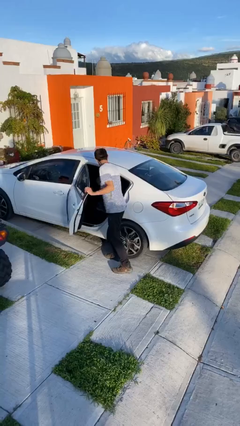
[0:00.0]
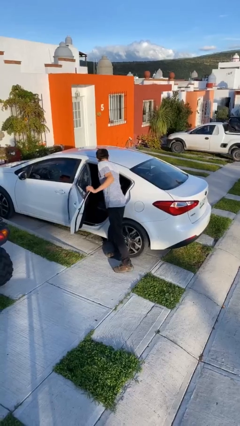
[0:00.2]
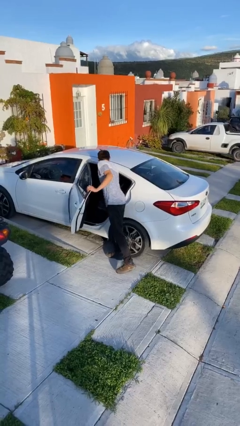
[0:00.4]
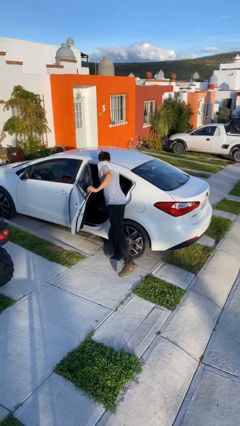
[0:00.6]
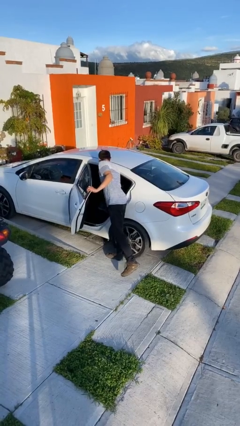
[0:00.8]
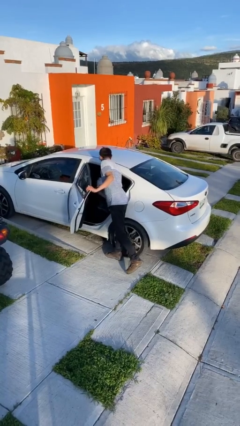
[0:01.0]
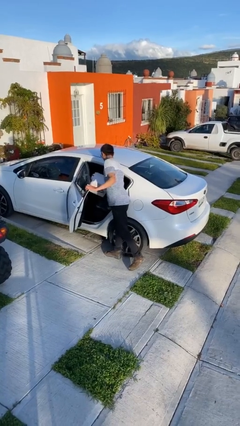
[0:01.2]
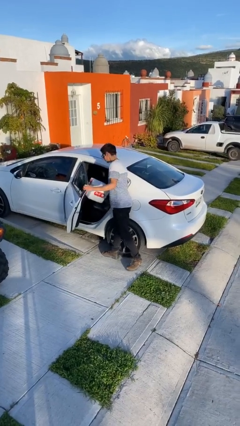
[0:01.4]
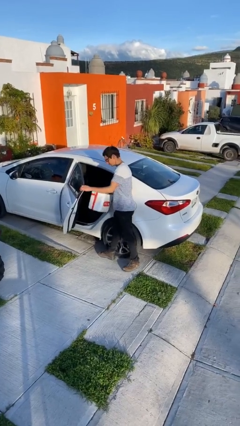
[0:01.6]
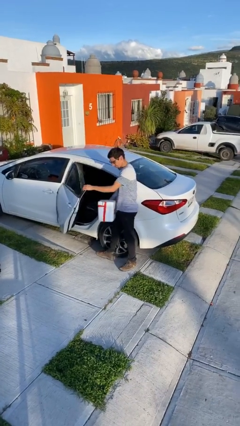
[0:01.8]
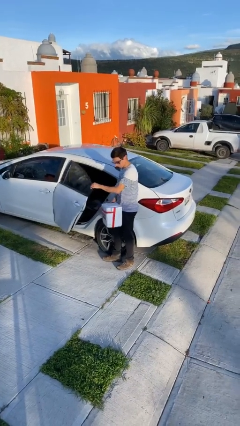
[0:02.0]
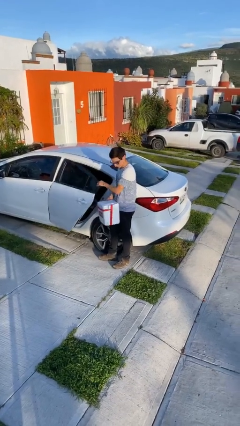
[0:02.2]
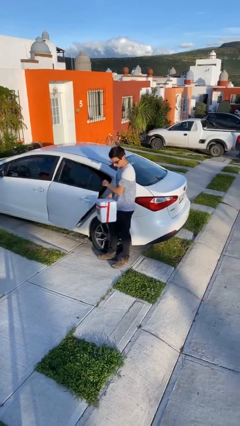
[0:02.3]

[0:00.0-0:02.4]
person unloads car

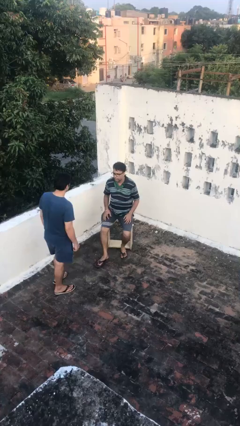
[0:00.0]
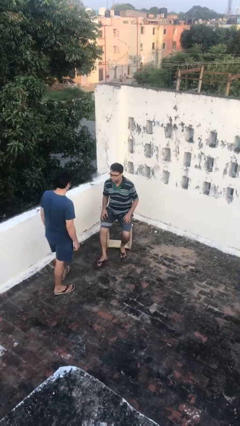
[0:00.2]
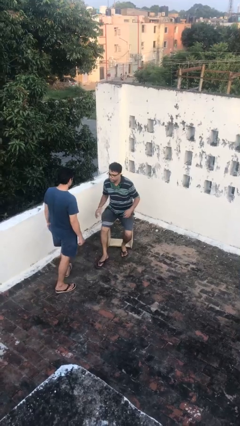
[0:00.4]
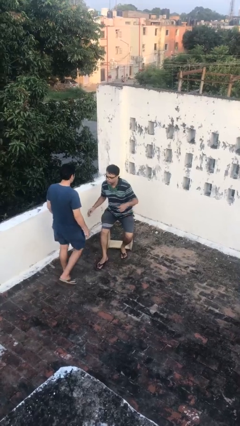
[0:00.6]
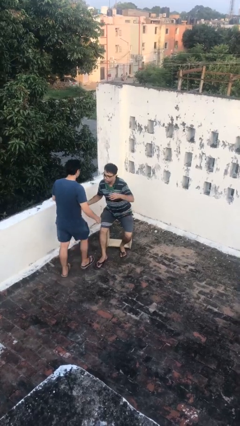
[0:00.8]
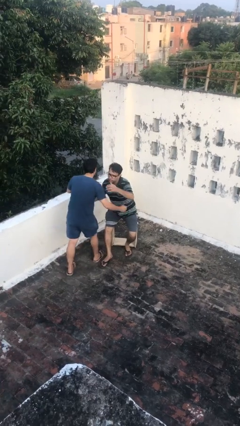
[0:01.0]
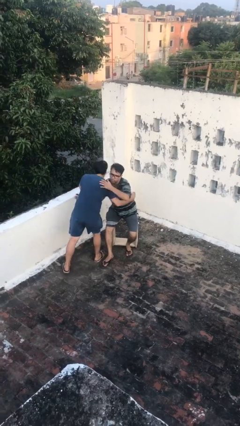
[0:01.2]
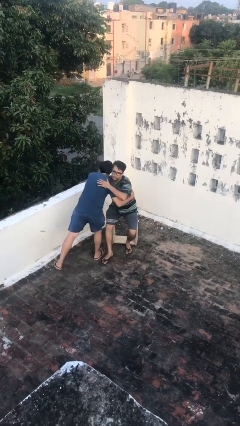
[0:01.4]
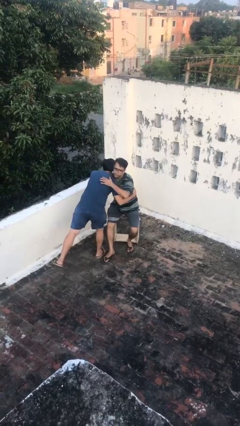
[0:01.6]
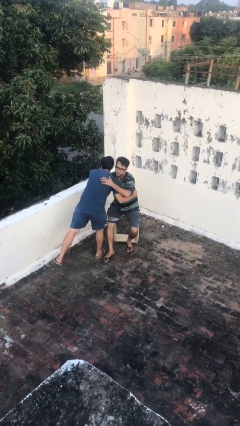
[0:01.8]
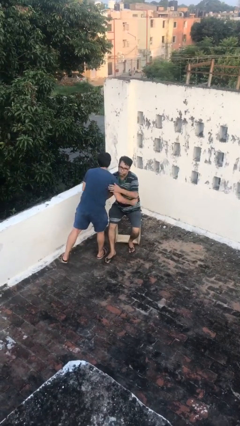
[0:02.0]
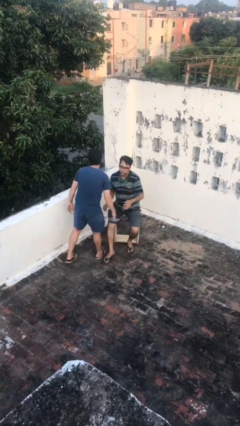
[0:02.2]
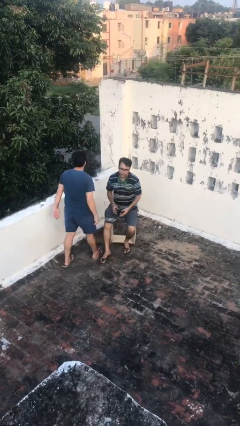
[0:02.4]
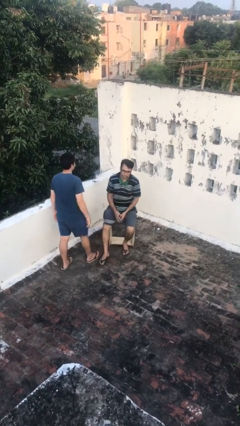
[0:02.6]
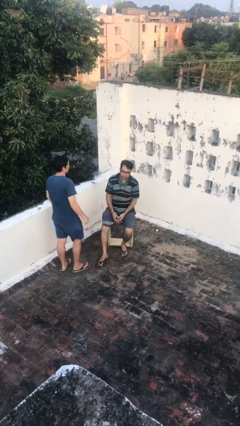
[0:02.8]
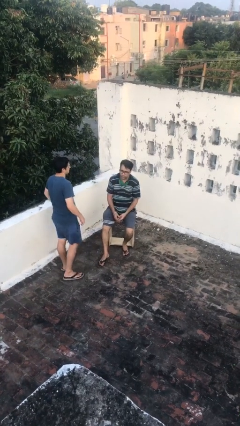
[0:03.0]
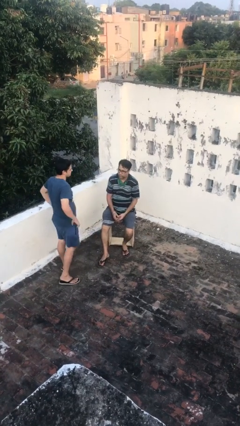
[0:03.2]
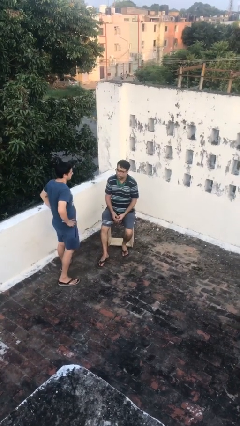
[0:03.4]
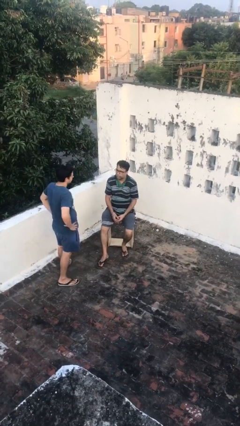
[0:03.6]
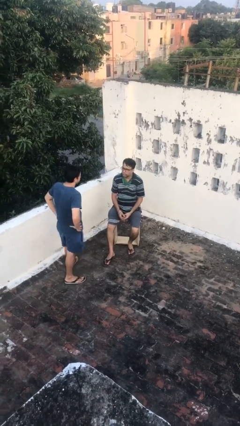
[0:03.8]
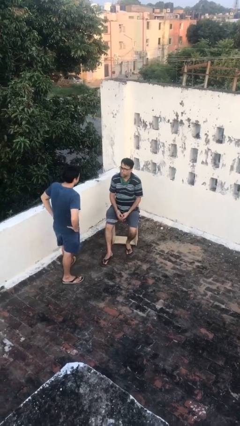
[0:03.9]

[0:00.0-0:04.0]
person embraces person

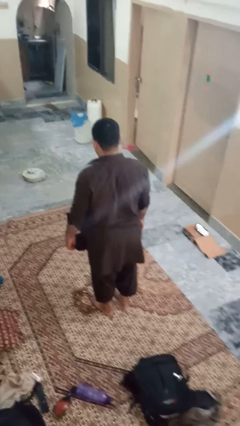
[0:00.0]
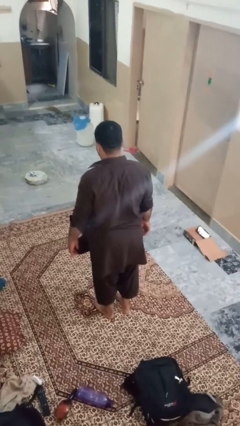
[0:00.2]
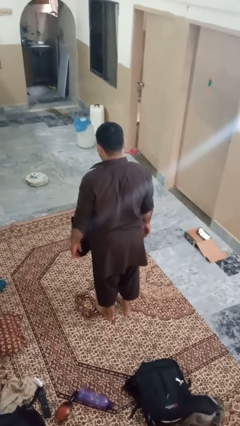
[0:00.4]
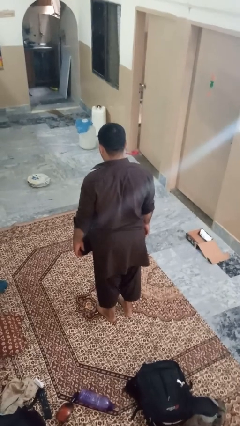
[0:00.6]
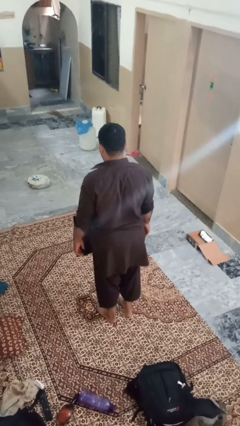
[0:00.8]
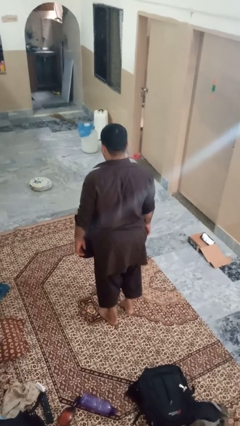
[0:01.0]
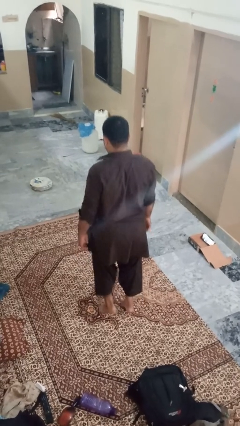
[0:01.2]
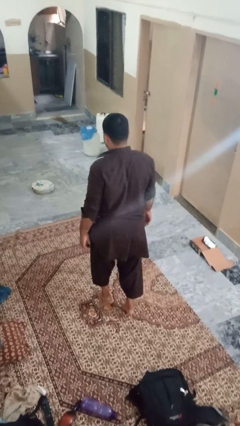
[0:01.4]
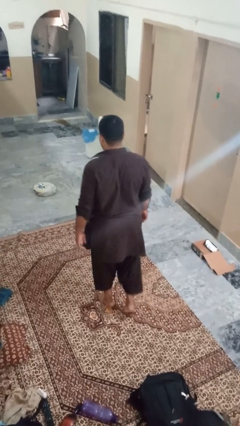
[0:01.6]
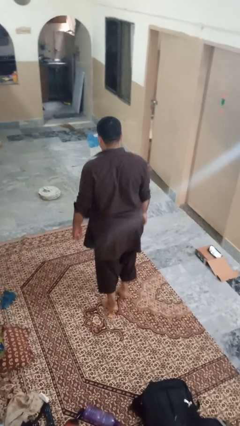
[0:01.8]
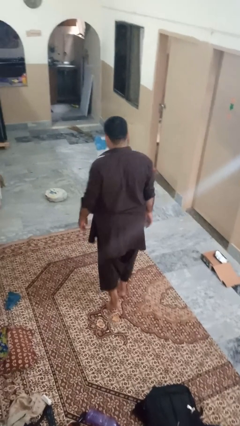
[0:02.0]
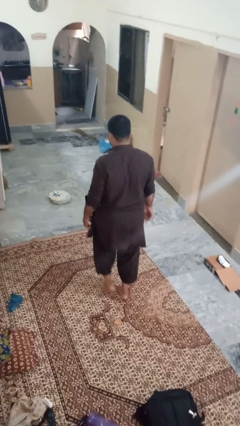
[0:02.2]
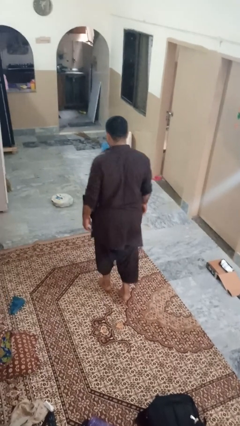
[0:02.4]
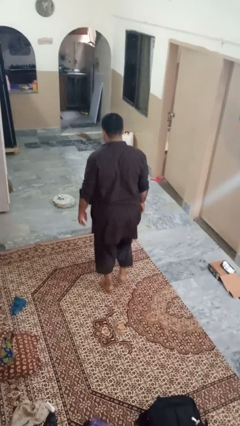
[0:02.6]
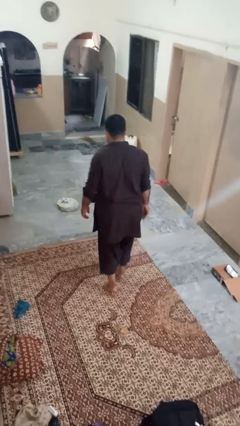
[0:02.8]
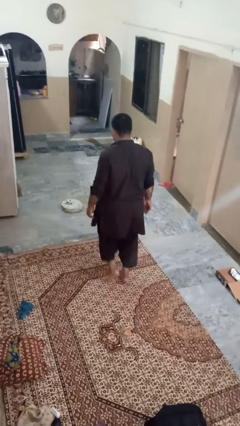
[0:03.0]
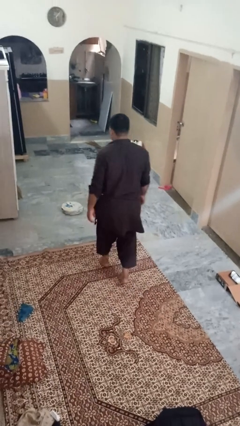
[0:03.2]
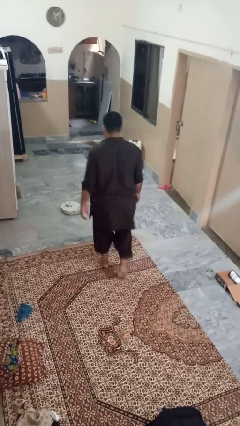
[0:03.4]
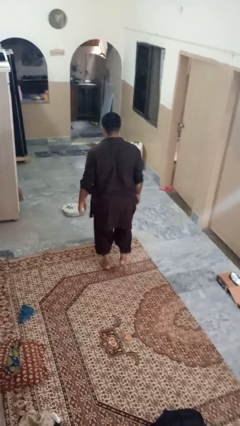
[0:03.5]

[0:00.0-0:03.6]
person walks tiptoe

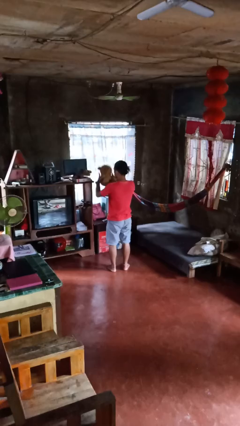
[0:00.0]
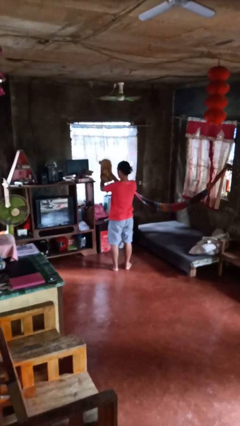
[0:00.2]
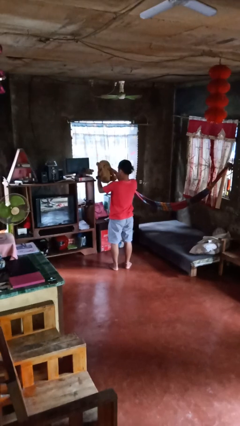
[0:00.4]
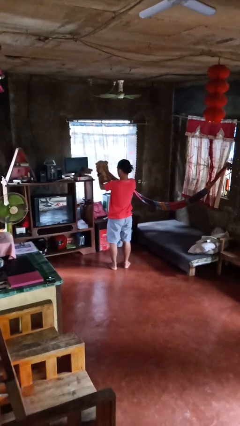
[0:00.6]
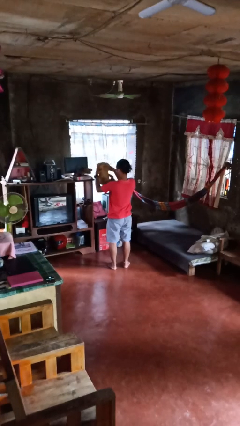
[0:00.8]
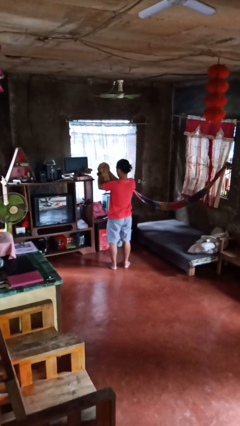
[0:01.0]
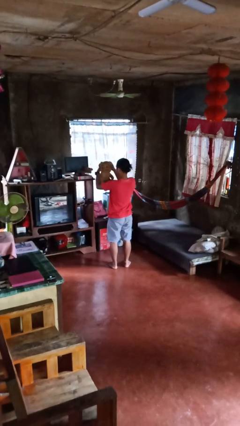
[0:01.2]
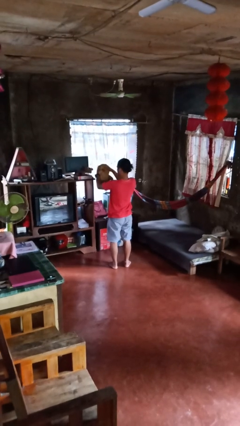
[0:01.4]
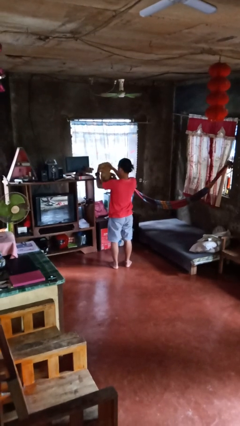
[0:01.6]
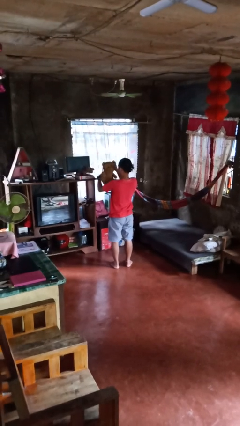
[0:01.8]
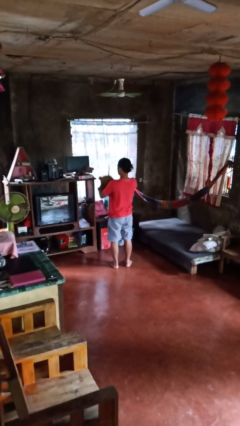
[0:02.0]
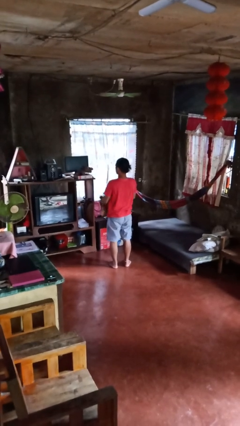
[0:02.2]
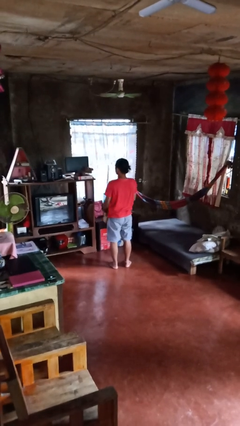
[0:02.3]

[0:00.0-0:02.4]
person squeezes object

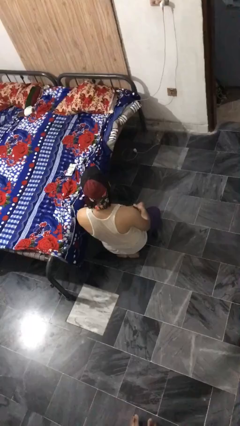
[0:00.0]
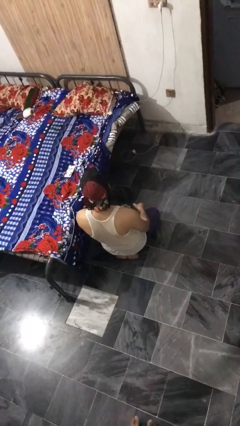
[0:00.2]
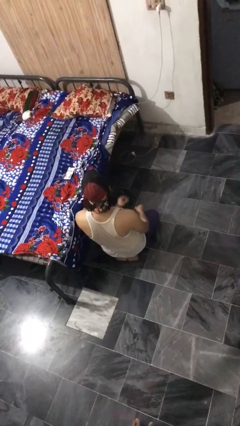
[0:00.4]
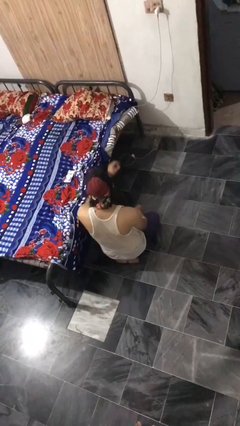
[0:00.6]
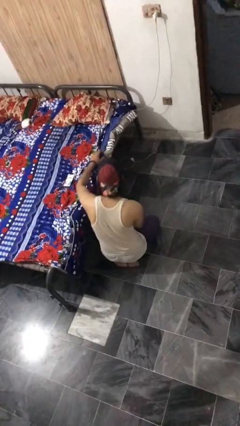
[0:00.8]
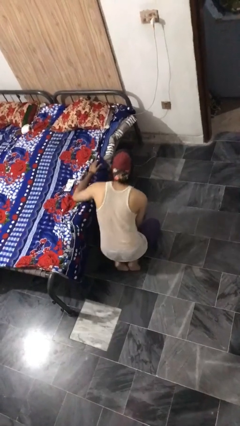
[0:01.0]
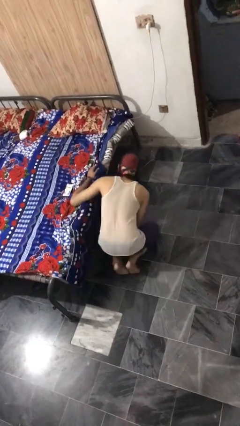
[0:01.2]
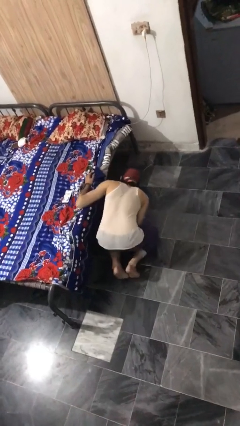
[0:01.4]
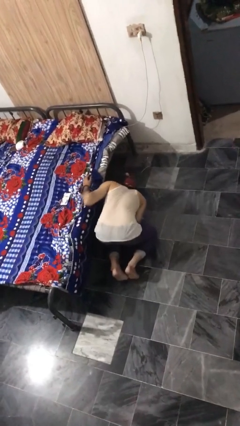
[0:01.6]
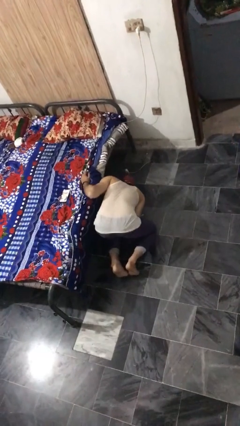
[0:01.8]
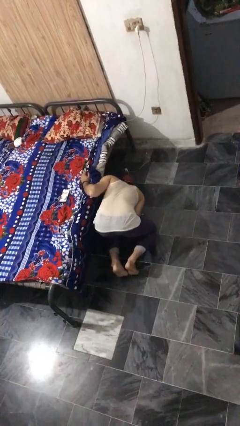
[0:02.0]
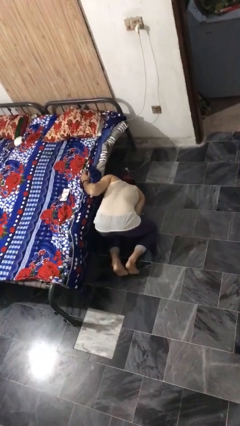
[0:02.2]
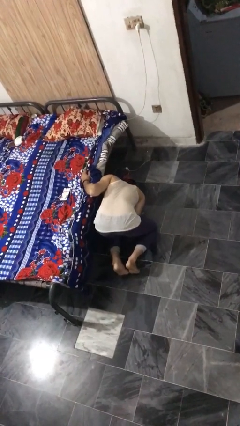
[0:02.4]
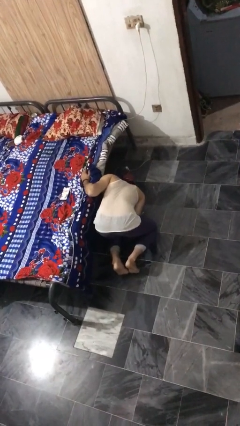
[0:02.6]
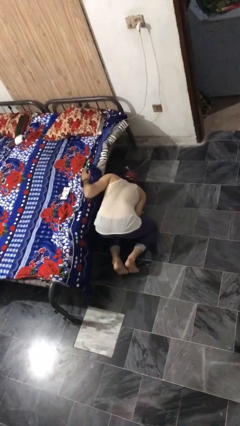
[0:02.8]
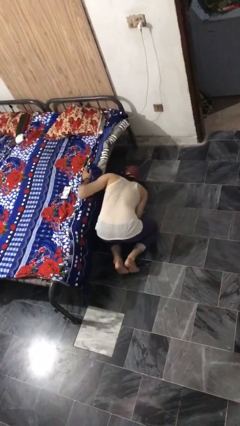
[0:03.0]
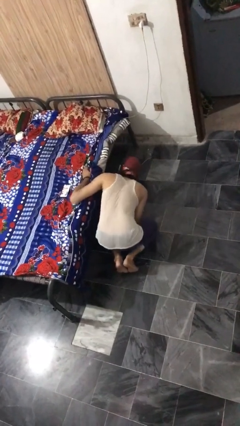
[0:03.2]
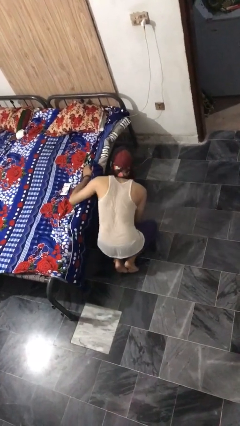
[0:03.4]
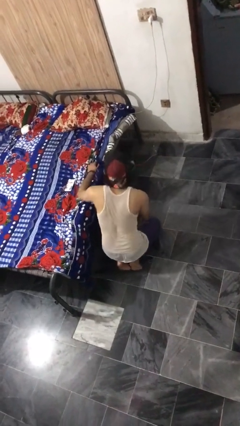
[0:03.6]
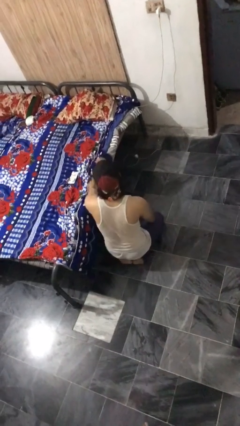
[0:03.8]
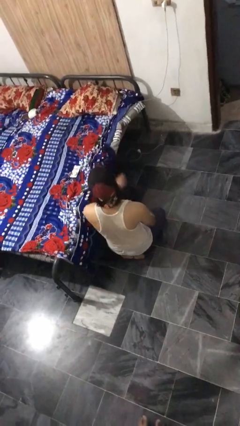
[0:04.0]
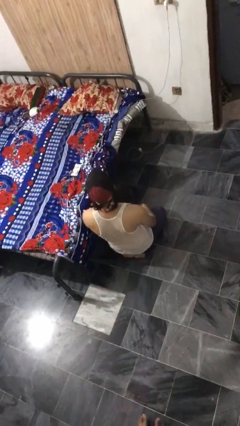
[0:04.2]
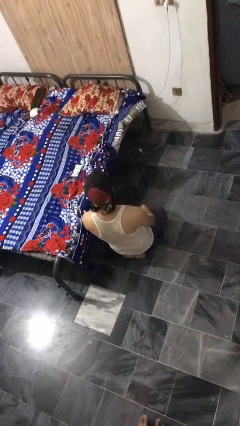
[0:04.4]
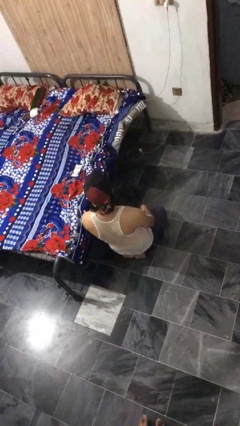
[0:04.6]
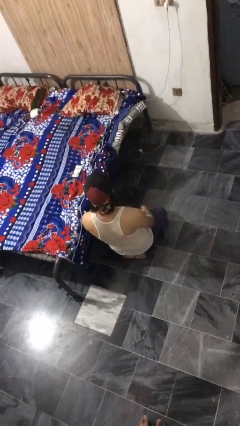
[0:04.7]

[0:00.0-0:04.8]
person searches under bed

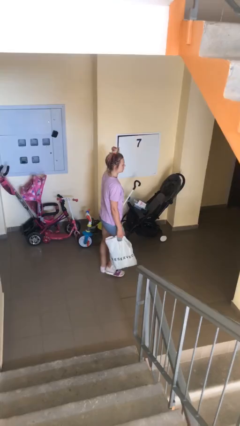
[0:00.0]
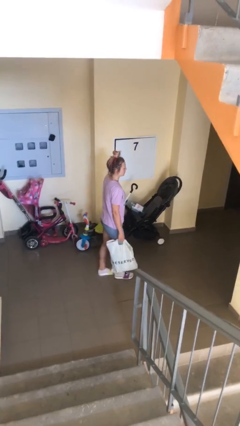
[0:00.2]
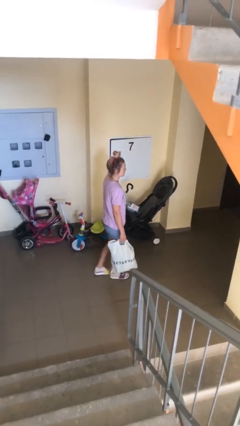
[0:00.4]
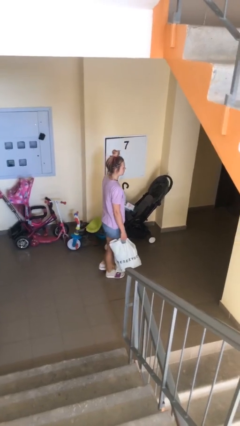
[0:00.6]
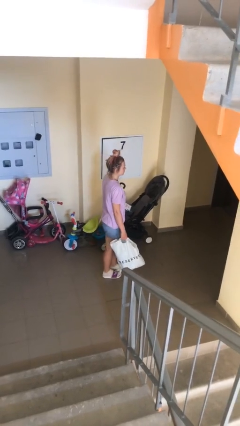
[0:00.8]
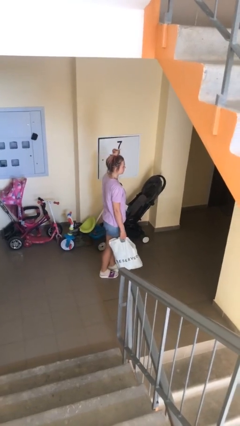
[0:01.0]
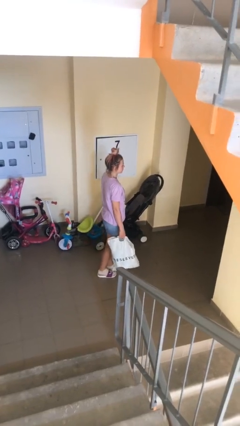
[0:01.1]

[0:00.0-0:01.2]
person carries groceries
